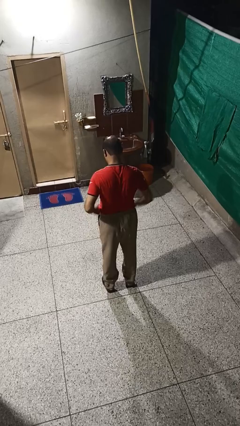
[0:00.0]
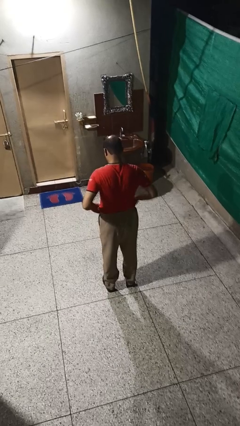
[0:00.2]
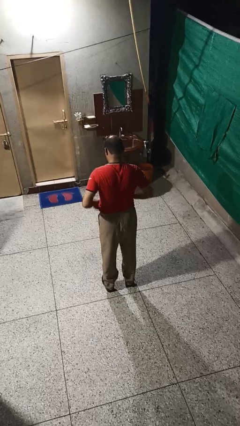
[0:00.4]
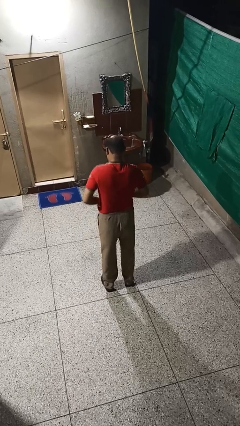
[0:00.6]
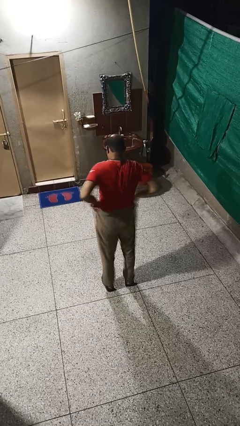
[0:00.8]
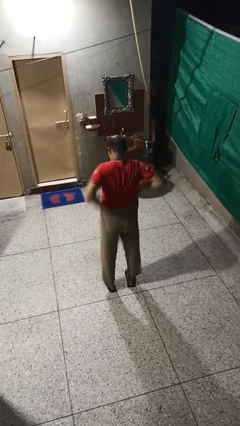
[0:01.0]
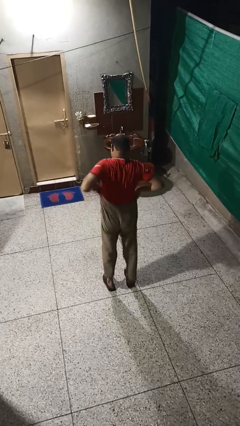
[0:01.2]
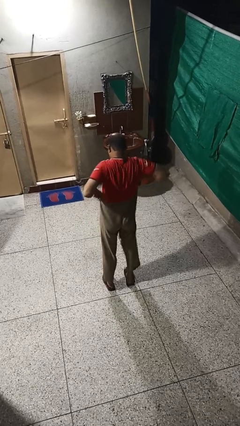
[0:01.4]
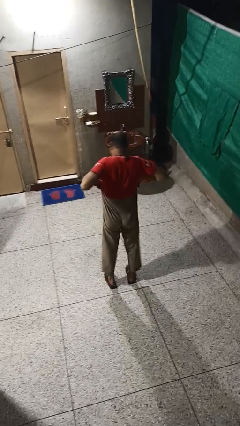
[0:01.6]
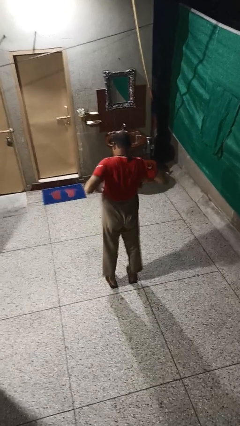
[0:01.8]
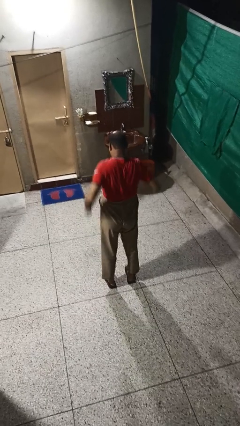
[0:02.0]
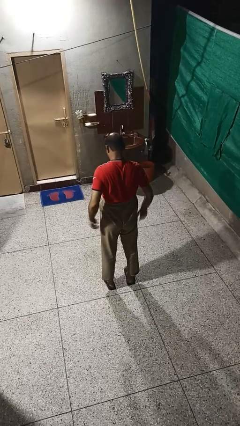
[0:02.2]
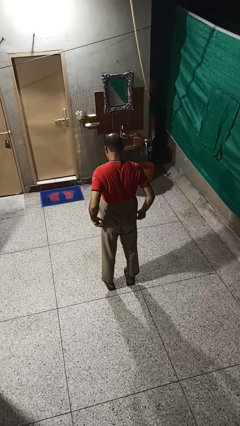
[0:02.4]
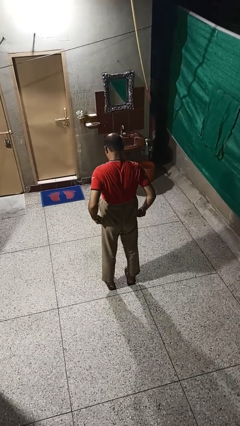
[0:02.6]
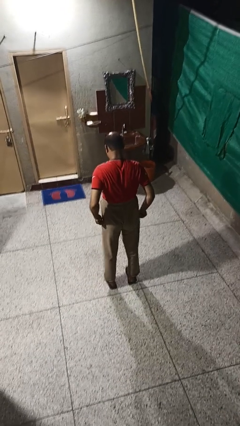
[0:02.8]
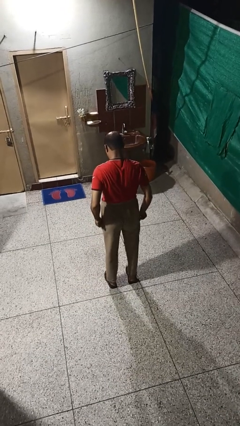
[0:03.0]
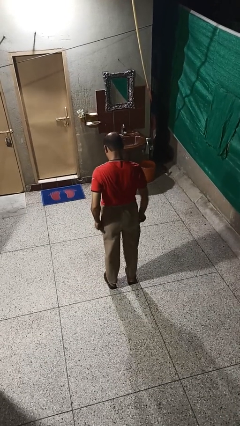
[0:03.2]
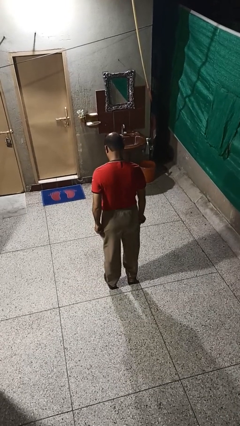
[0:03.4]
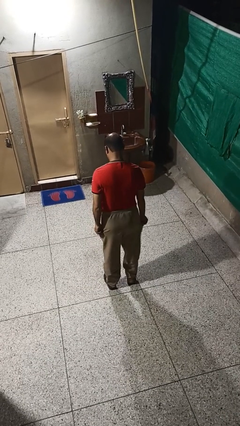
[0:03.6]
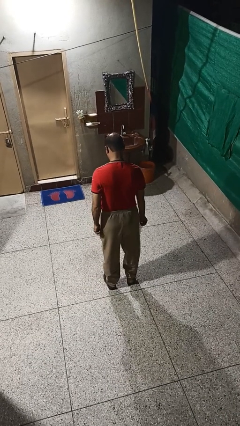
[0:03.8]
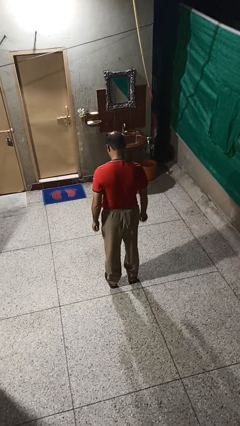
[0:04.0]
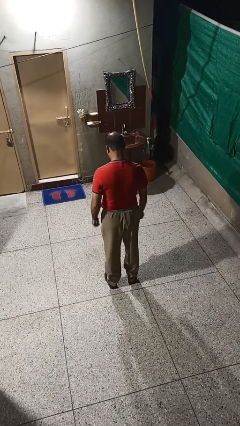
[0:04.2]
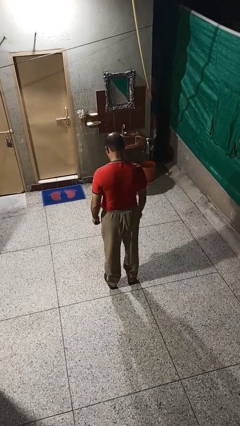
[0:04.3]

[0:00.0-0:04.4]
person hikes up pants

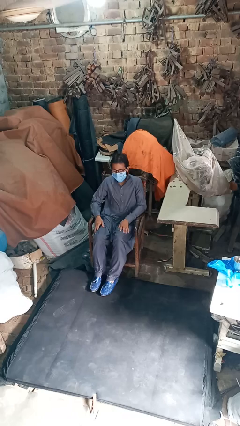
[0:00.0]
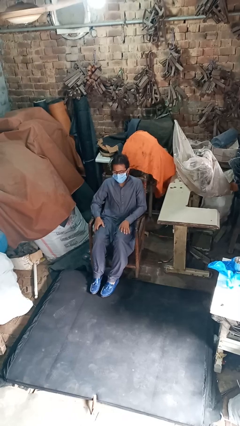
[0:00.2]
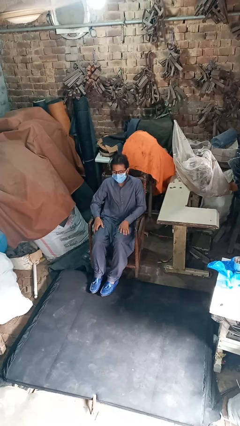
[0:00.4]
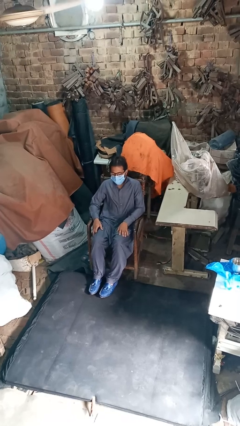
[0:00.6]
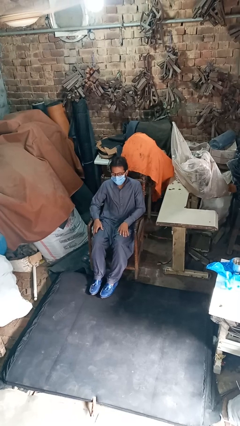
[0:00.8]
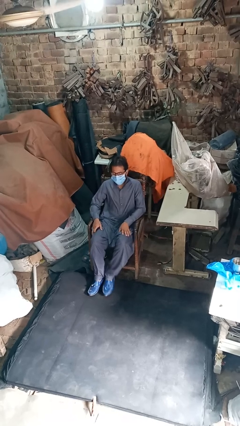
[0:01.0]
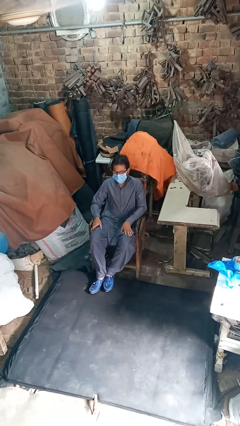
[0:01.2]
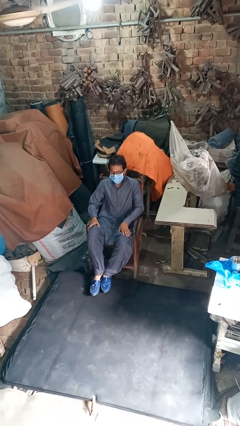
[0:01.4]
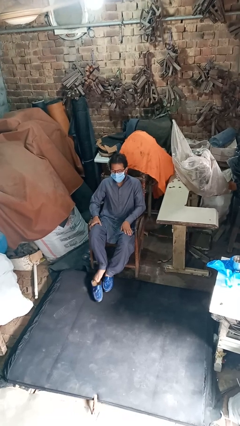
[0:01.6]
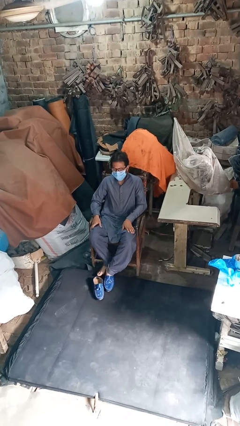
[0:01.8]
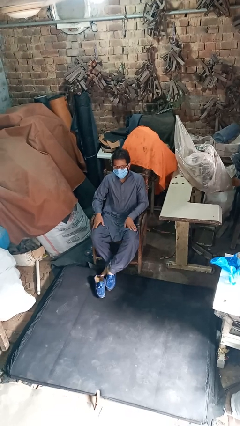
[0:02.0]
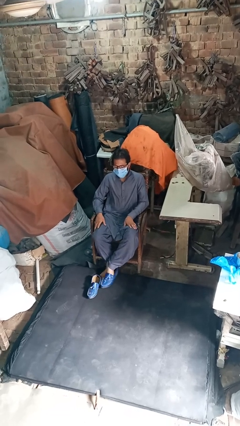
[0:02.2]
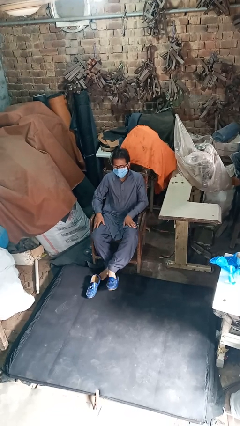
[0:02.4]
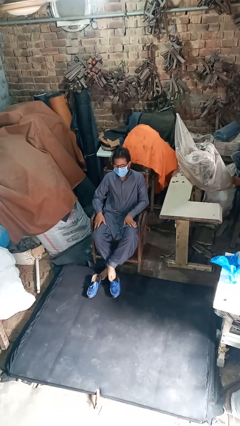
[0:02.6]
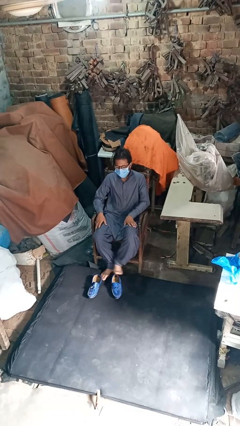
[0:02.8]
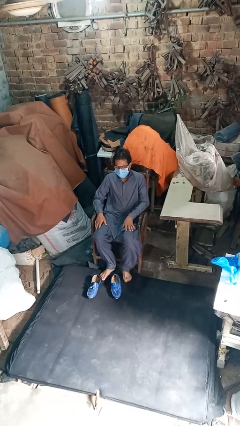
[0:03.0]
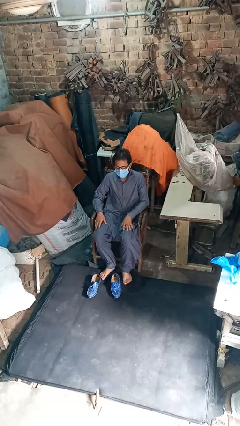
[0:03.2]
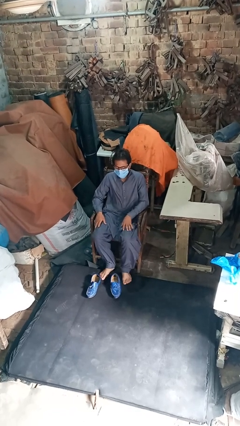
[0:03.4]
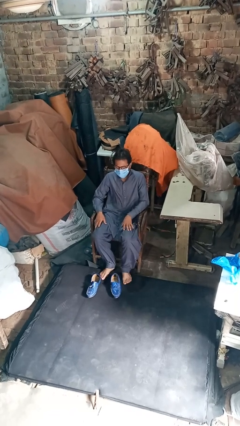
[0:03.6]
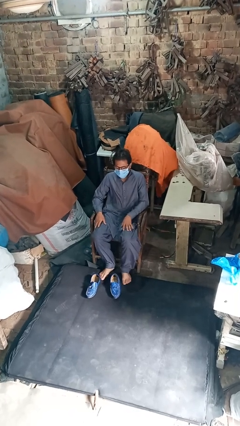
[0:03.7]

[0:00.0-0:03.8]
person takes off shoes

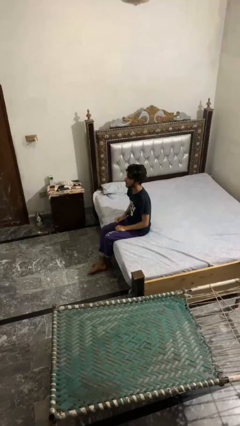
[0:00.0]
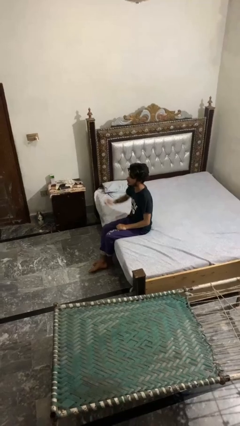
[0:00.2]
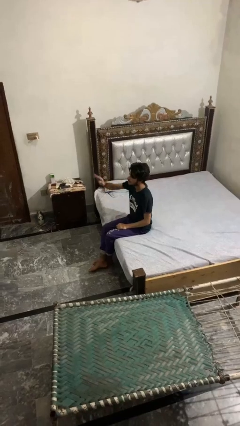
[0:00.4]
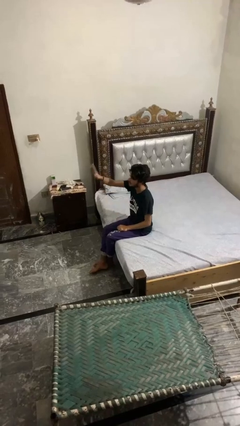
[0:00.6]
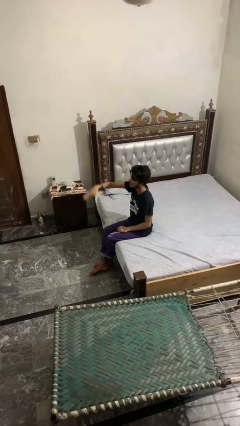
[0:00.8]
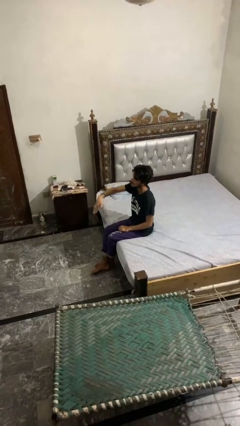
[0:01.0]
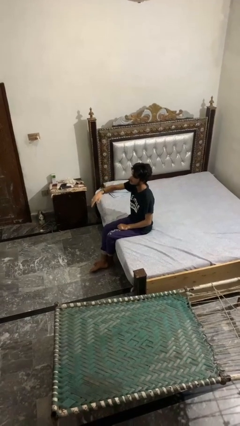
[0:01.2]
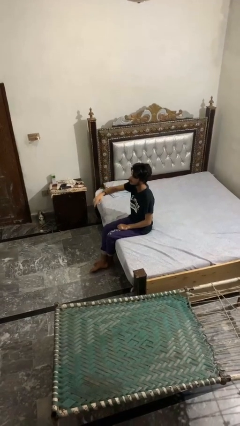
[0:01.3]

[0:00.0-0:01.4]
person gestures swipe down

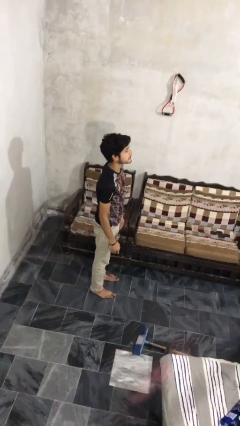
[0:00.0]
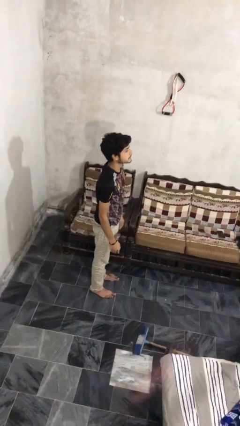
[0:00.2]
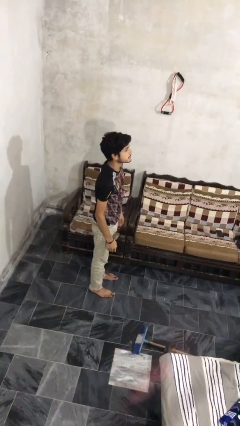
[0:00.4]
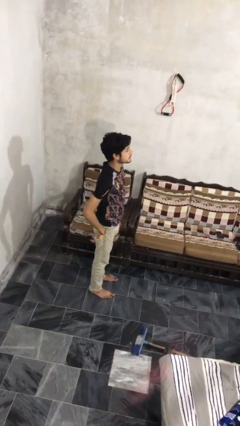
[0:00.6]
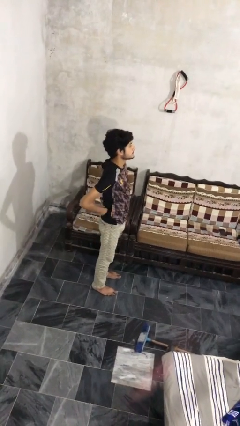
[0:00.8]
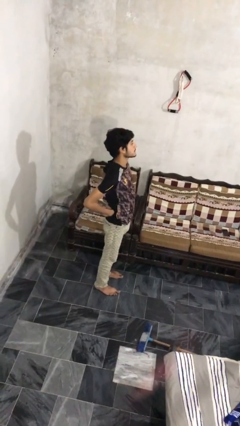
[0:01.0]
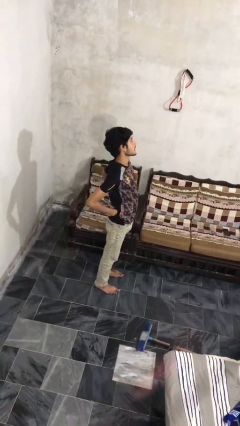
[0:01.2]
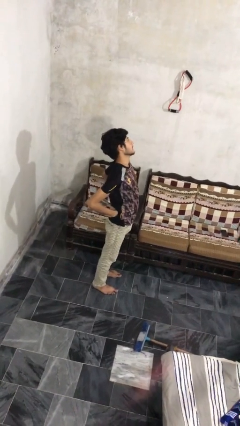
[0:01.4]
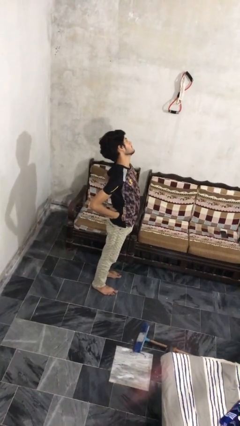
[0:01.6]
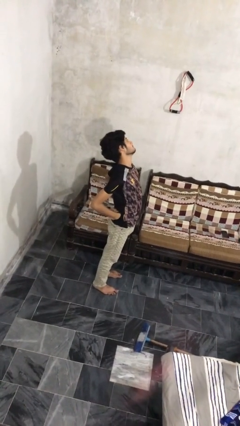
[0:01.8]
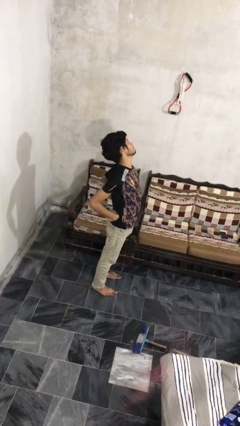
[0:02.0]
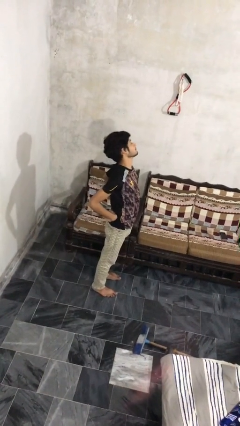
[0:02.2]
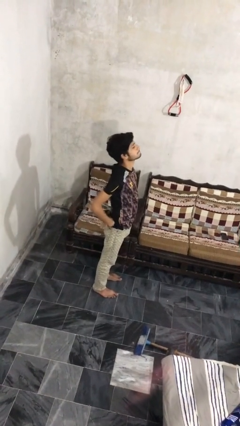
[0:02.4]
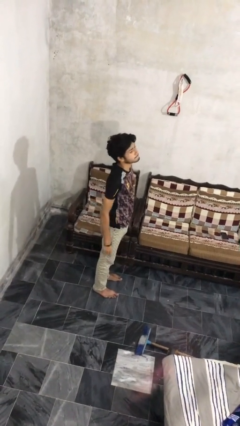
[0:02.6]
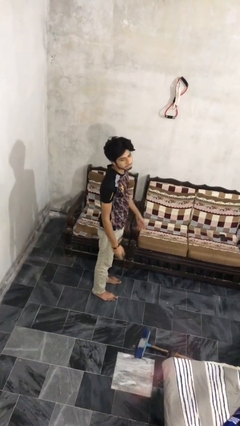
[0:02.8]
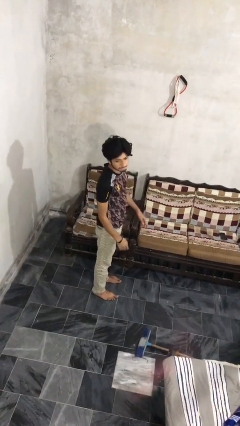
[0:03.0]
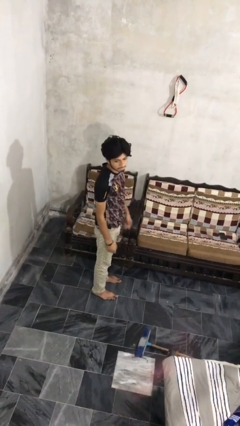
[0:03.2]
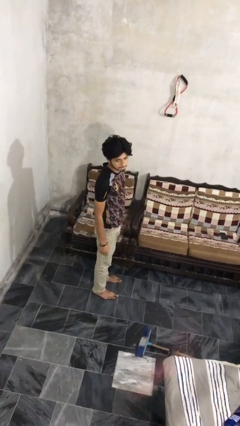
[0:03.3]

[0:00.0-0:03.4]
person stretches back

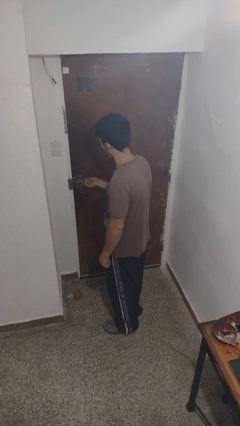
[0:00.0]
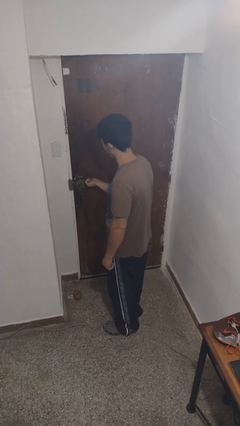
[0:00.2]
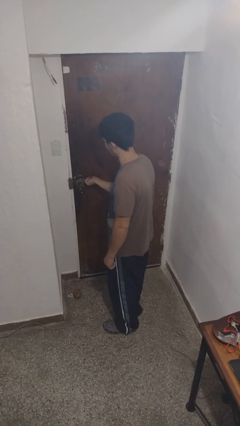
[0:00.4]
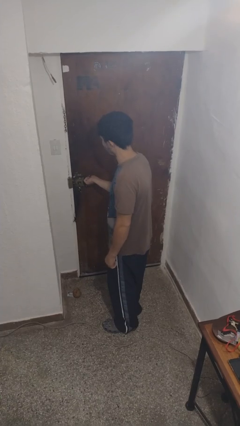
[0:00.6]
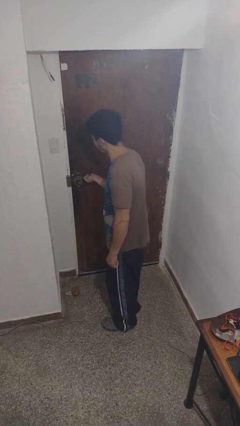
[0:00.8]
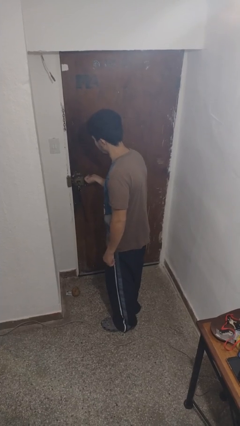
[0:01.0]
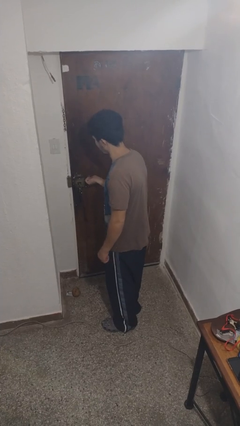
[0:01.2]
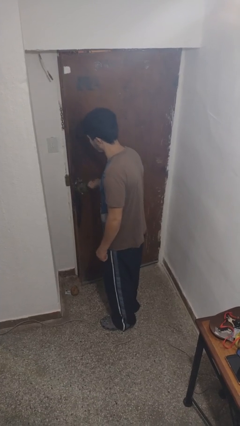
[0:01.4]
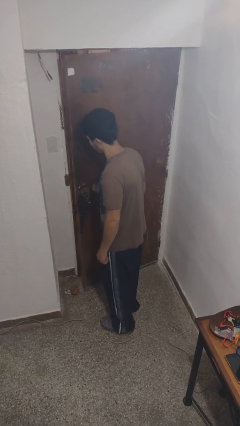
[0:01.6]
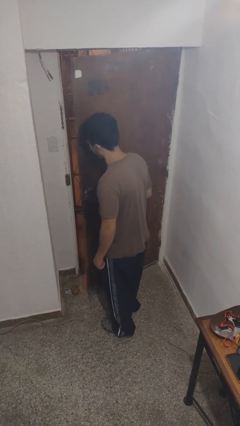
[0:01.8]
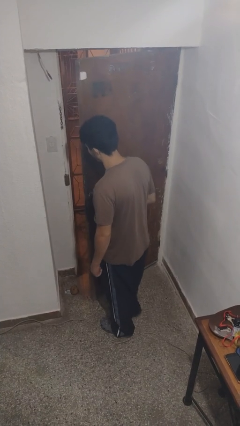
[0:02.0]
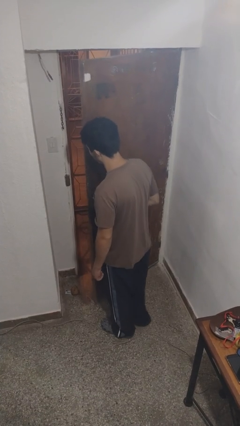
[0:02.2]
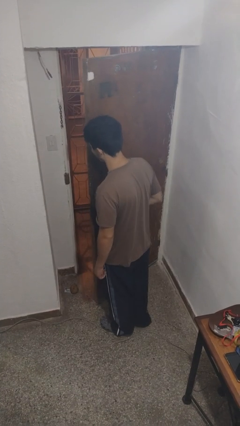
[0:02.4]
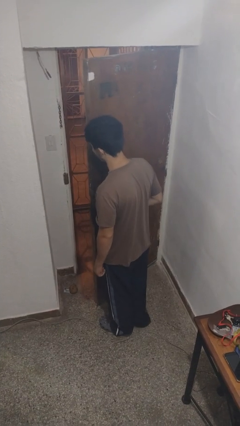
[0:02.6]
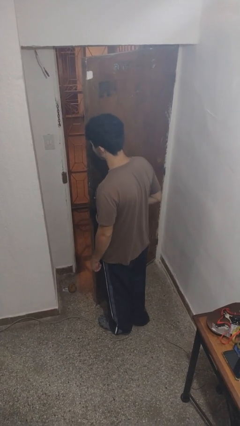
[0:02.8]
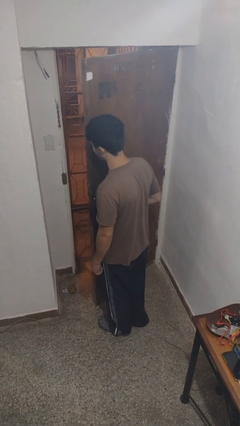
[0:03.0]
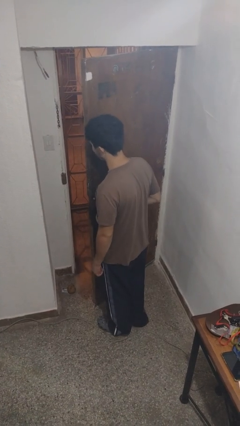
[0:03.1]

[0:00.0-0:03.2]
person opens facility door

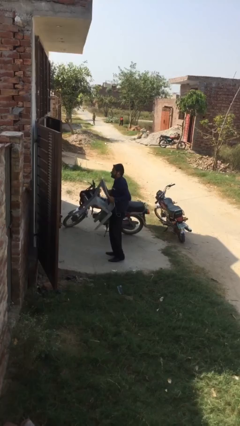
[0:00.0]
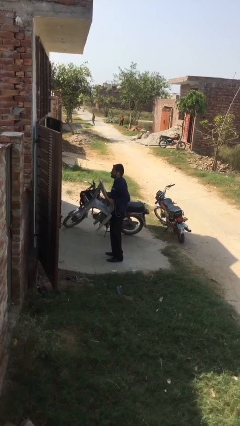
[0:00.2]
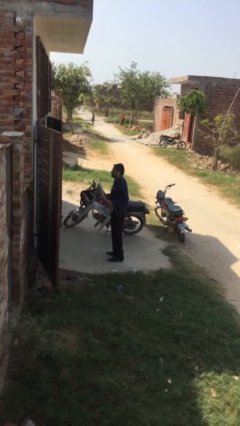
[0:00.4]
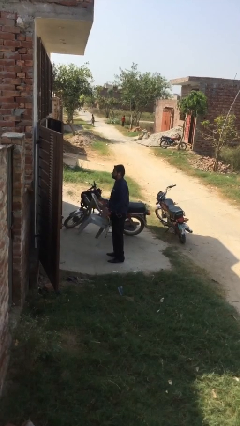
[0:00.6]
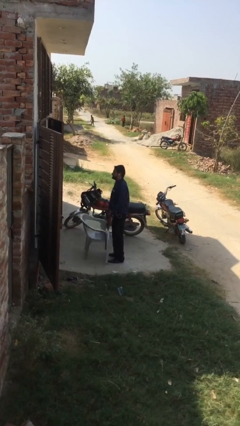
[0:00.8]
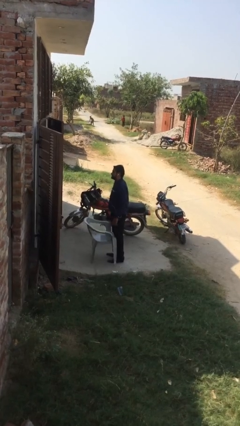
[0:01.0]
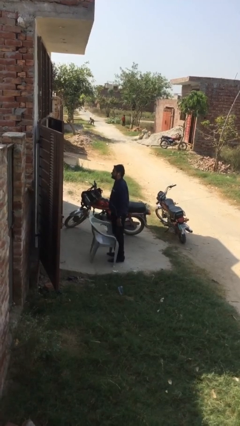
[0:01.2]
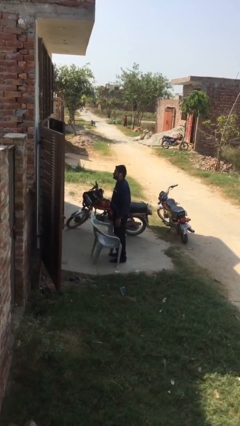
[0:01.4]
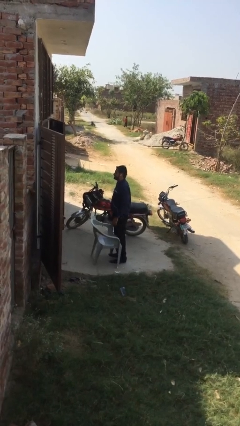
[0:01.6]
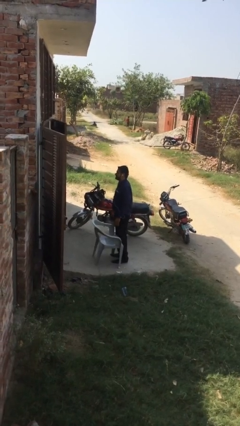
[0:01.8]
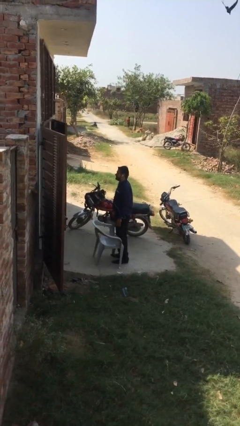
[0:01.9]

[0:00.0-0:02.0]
person puts down object on floor
